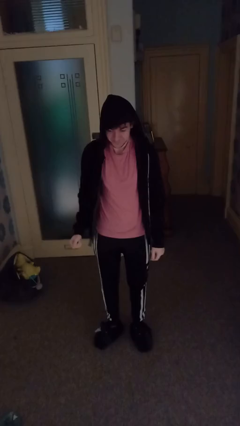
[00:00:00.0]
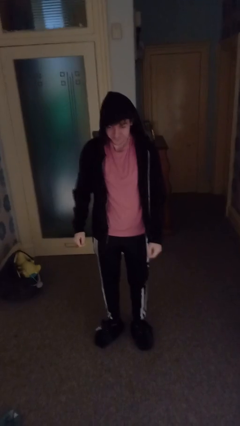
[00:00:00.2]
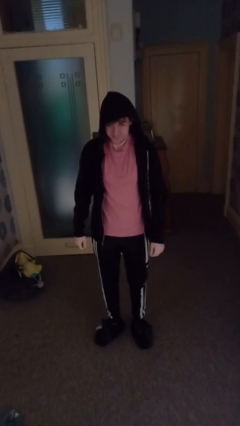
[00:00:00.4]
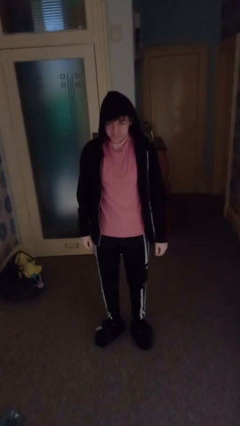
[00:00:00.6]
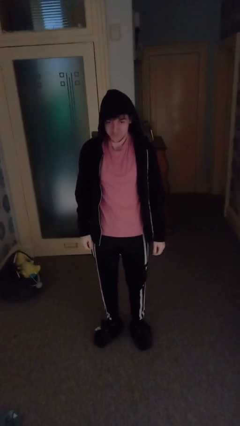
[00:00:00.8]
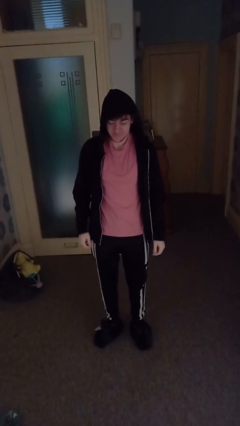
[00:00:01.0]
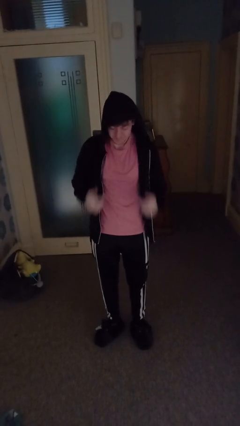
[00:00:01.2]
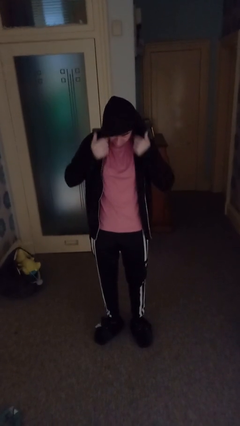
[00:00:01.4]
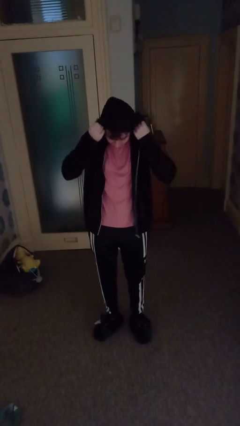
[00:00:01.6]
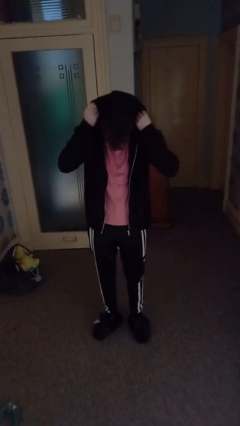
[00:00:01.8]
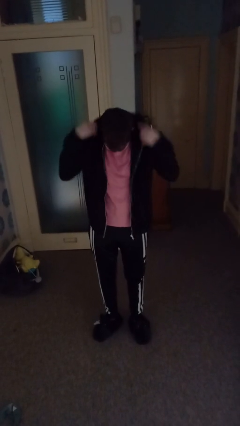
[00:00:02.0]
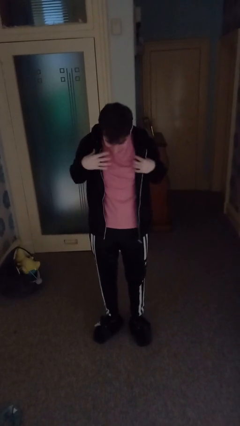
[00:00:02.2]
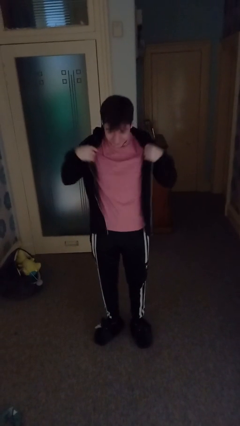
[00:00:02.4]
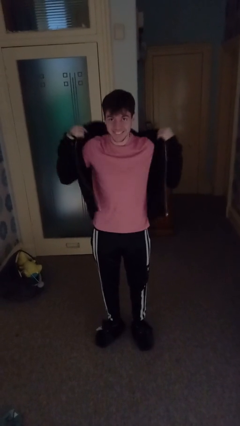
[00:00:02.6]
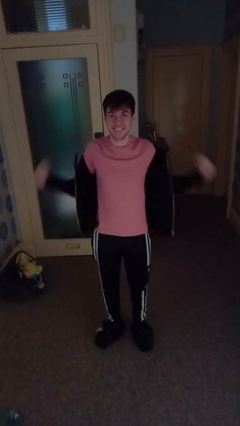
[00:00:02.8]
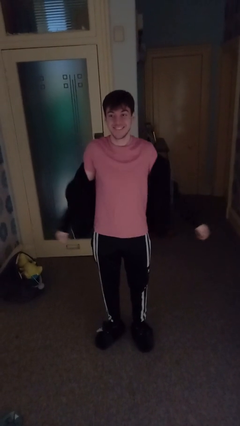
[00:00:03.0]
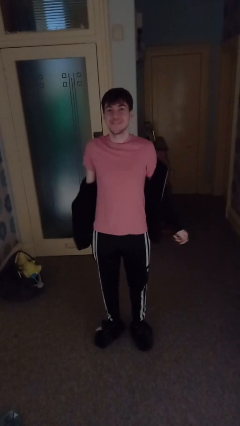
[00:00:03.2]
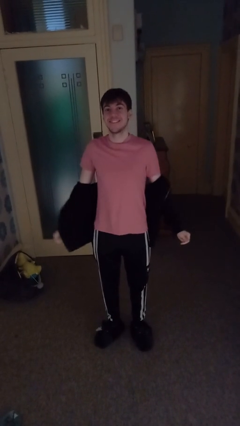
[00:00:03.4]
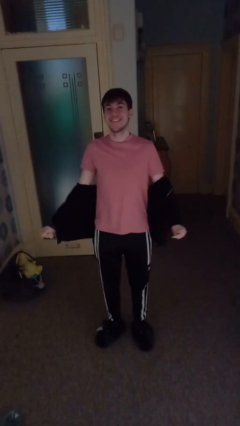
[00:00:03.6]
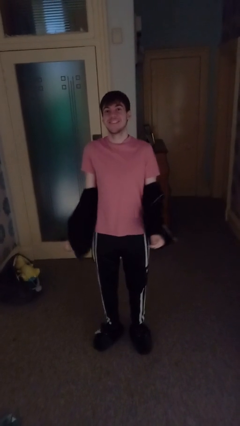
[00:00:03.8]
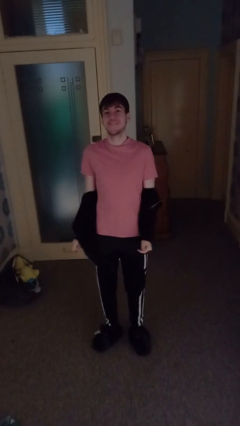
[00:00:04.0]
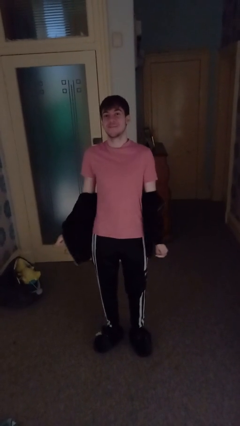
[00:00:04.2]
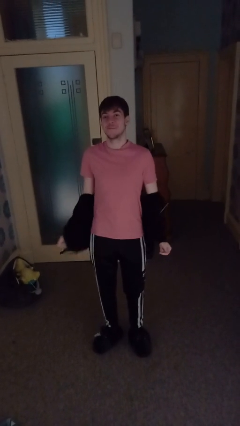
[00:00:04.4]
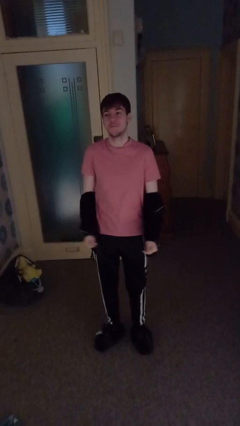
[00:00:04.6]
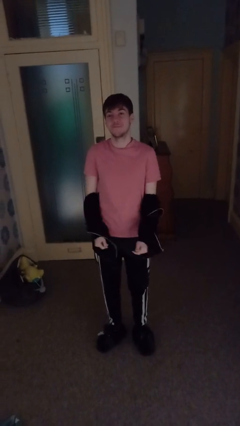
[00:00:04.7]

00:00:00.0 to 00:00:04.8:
person takes off hoodie

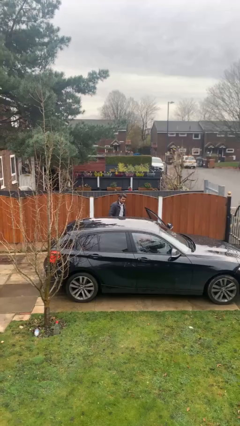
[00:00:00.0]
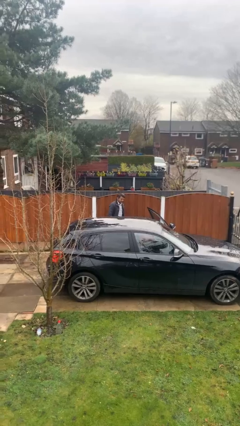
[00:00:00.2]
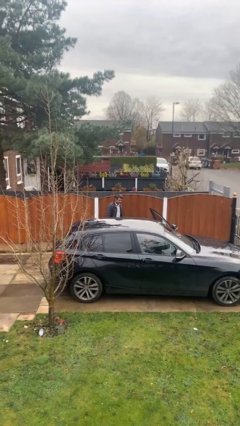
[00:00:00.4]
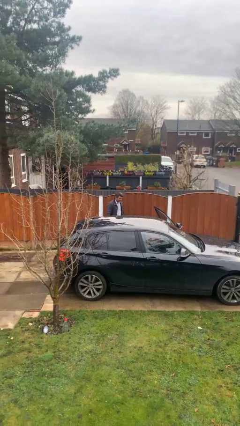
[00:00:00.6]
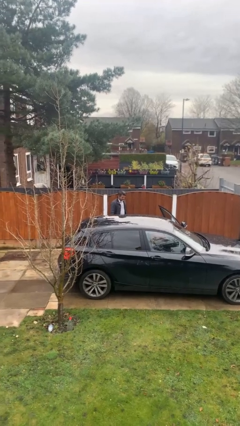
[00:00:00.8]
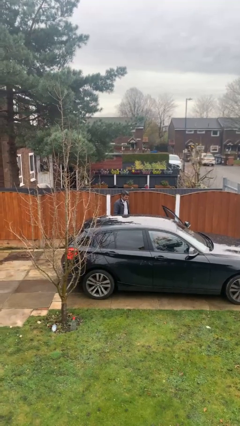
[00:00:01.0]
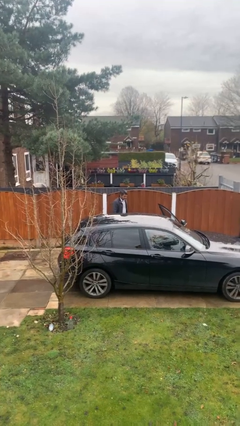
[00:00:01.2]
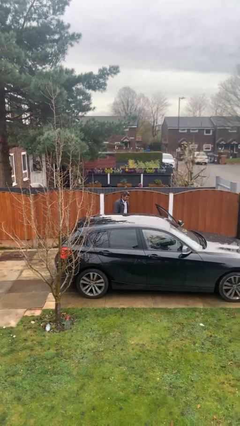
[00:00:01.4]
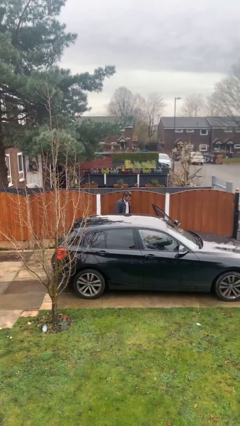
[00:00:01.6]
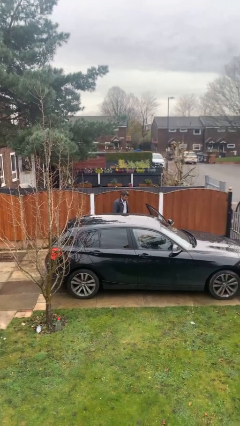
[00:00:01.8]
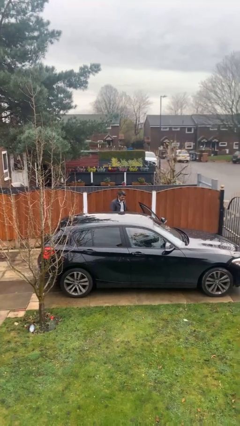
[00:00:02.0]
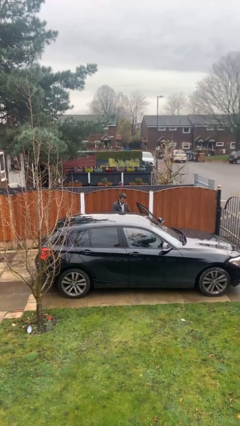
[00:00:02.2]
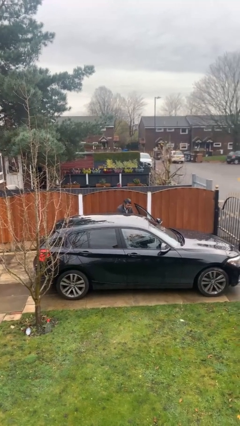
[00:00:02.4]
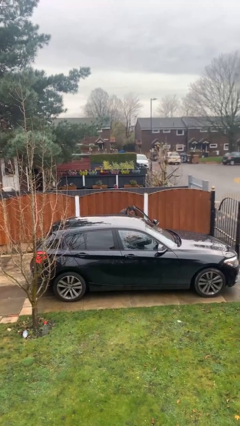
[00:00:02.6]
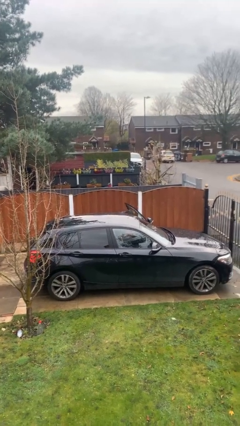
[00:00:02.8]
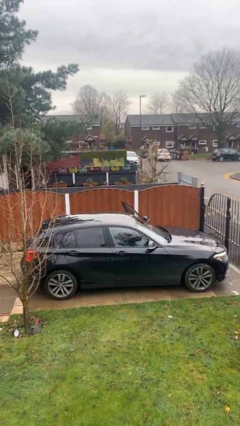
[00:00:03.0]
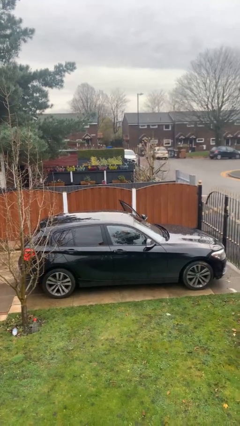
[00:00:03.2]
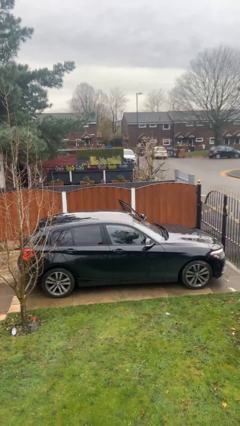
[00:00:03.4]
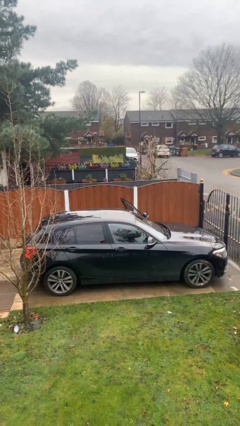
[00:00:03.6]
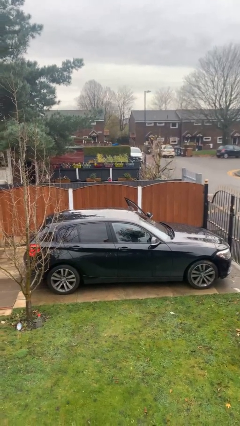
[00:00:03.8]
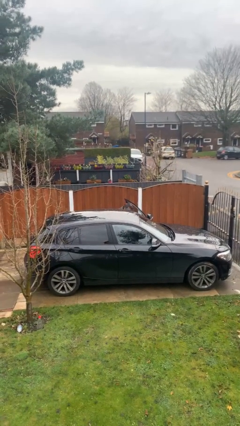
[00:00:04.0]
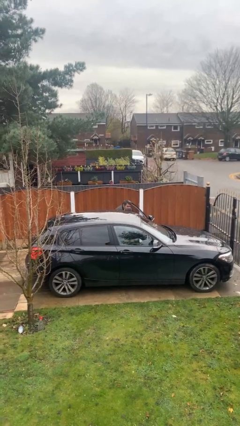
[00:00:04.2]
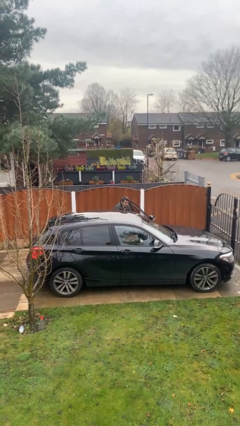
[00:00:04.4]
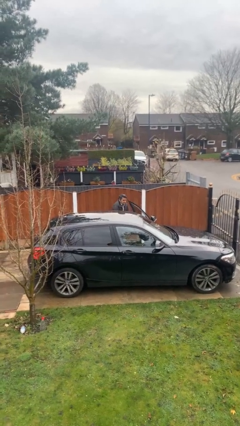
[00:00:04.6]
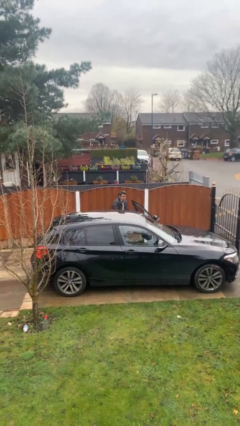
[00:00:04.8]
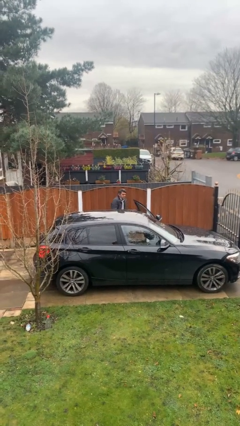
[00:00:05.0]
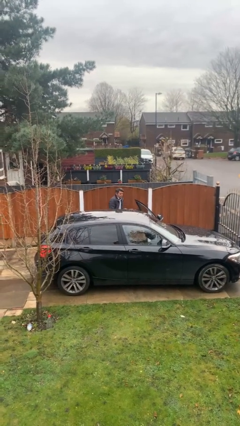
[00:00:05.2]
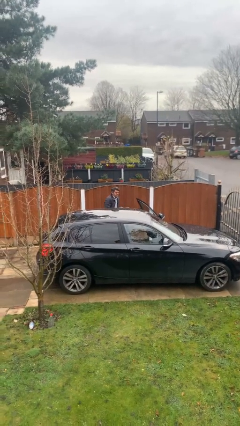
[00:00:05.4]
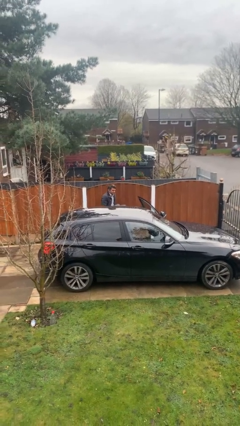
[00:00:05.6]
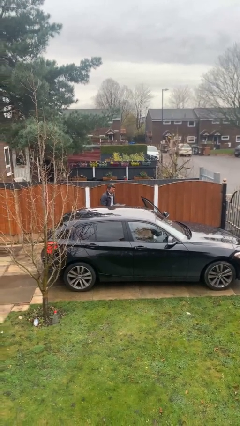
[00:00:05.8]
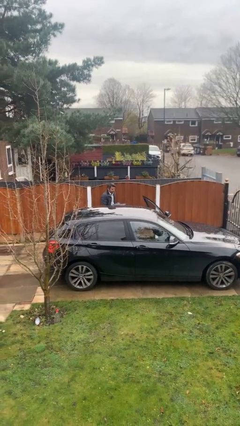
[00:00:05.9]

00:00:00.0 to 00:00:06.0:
person unloads car

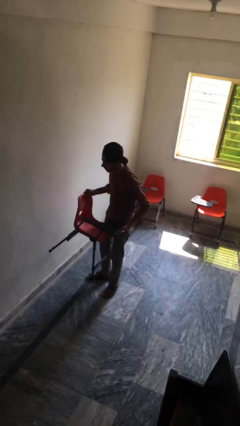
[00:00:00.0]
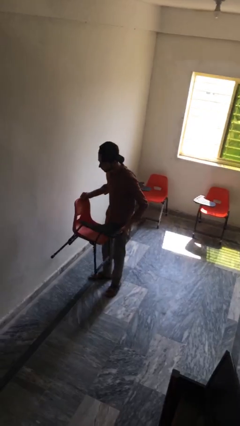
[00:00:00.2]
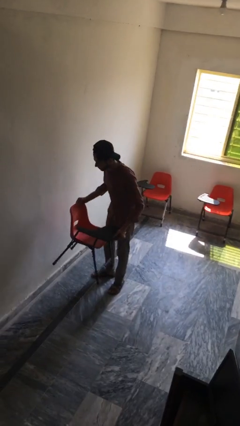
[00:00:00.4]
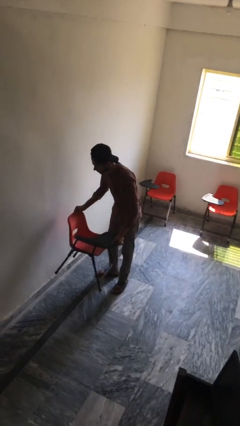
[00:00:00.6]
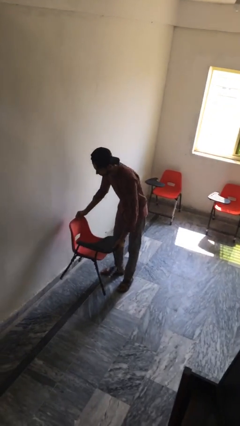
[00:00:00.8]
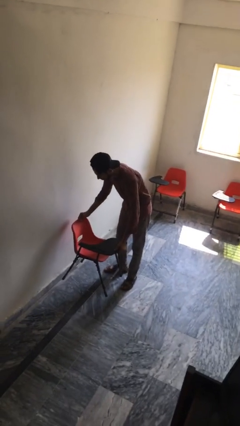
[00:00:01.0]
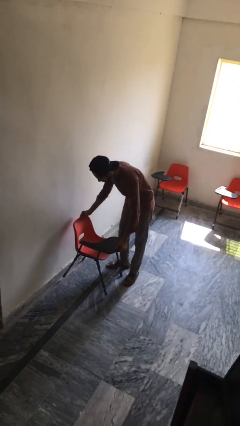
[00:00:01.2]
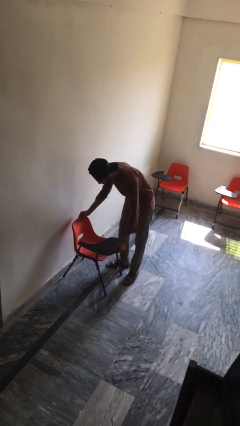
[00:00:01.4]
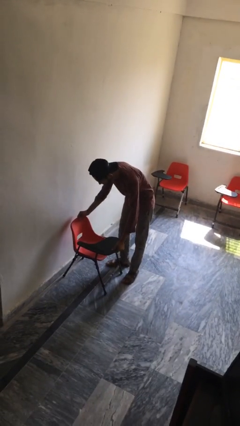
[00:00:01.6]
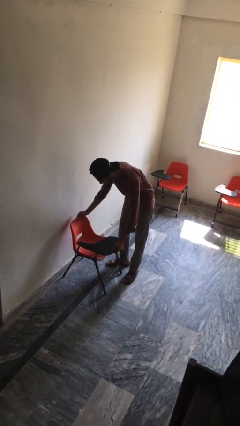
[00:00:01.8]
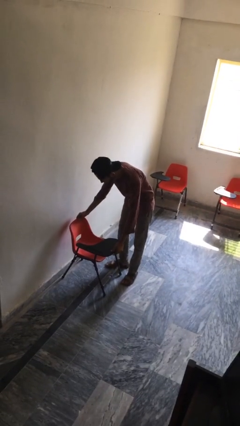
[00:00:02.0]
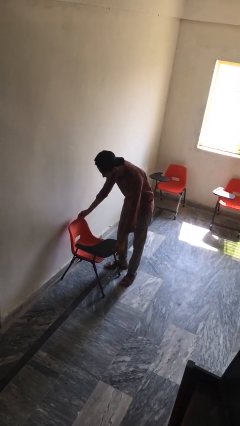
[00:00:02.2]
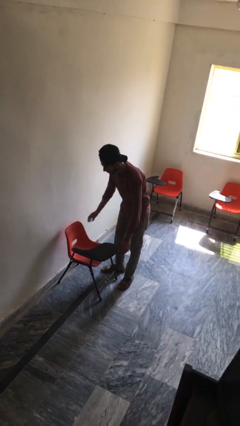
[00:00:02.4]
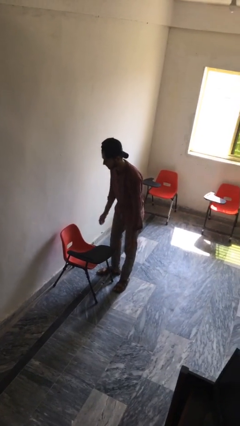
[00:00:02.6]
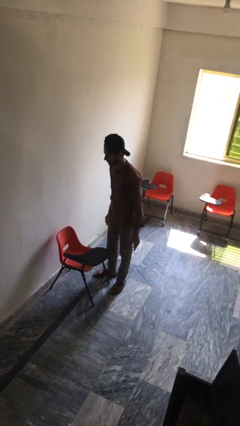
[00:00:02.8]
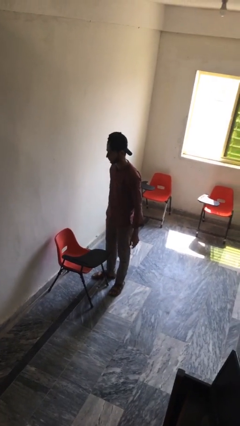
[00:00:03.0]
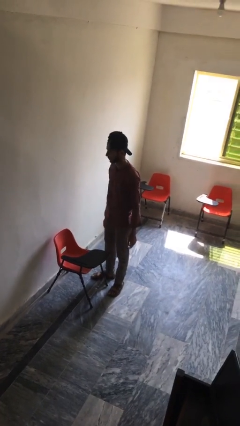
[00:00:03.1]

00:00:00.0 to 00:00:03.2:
person puts down object on floor

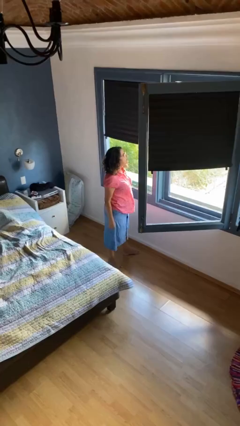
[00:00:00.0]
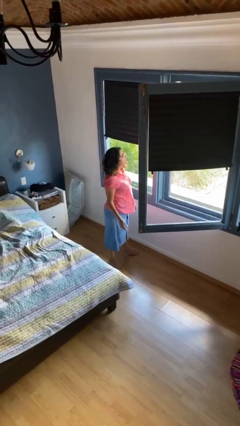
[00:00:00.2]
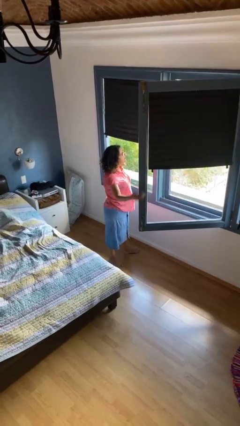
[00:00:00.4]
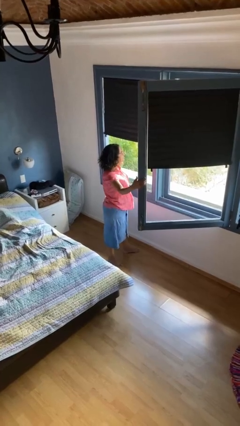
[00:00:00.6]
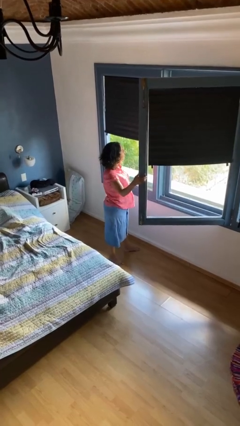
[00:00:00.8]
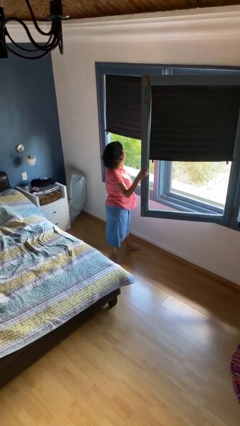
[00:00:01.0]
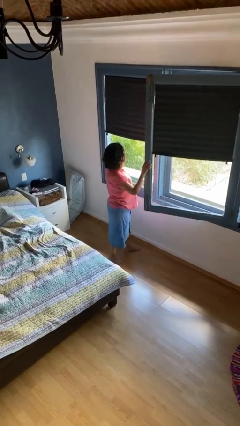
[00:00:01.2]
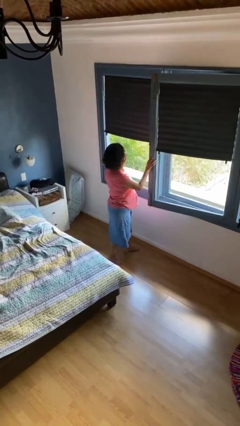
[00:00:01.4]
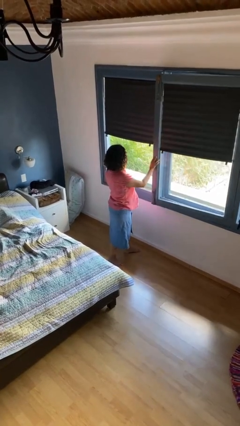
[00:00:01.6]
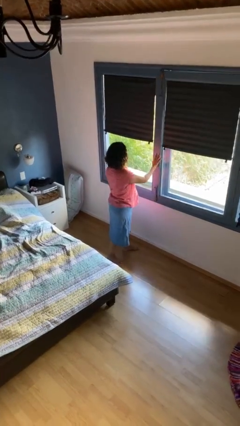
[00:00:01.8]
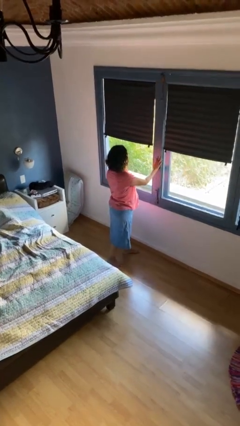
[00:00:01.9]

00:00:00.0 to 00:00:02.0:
person closes home window

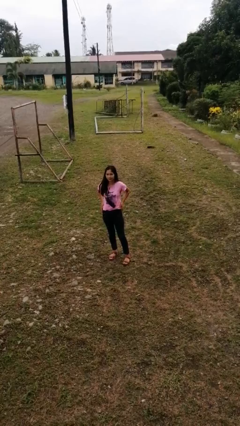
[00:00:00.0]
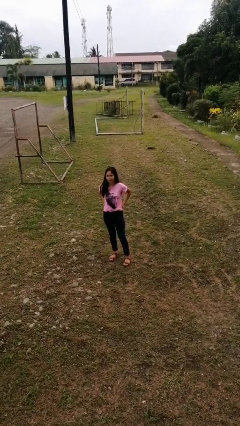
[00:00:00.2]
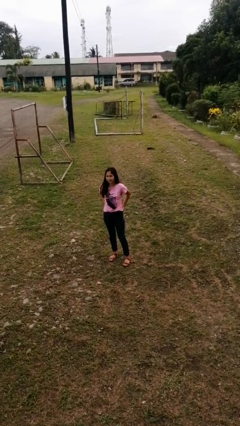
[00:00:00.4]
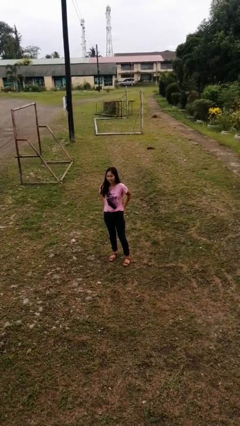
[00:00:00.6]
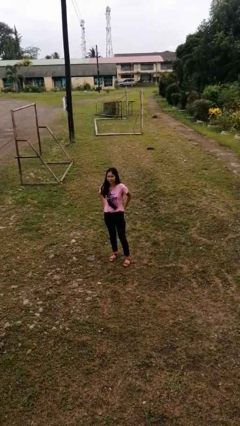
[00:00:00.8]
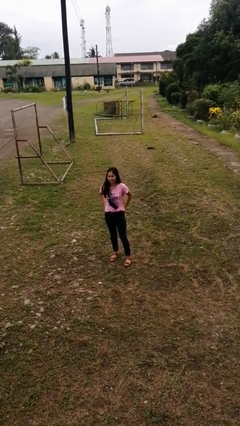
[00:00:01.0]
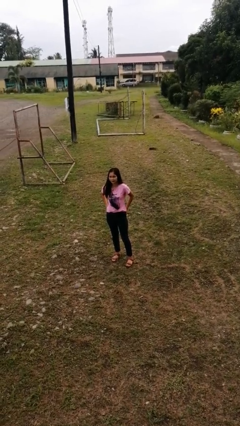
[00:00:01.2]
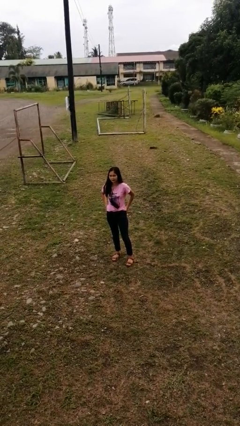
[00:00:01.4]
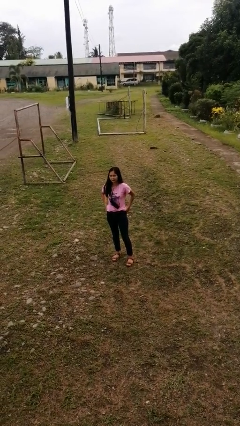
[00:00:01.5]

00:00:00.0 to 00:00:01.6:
person puts hands in back pockets
